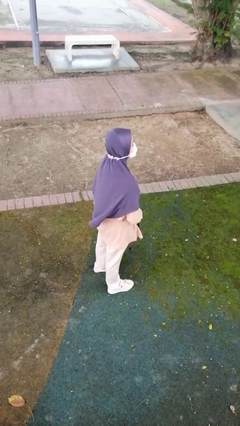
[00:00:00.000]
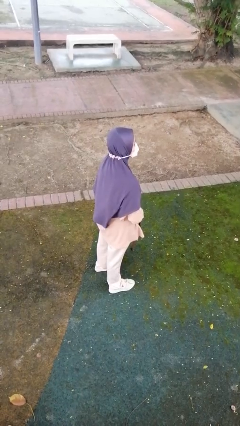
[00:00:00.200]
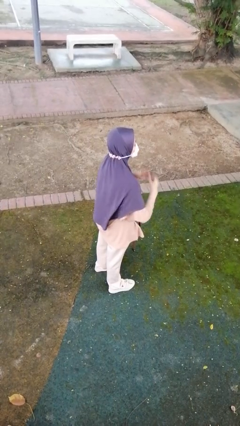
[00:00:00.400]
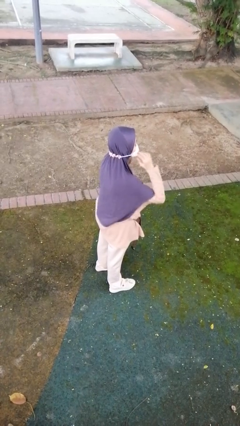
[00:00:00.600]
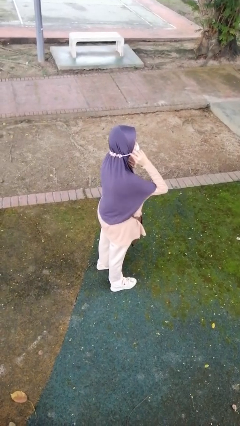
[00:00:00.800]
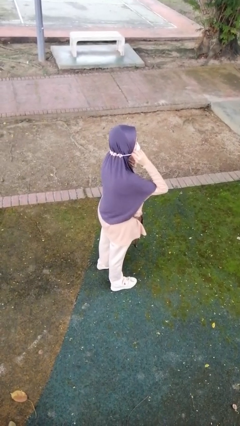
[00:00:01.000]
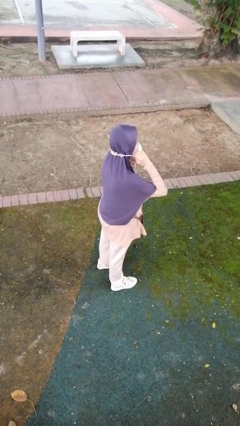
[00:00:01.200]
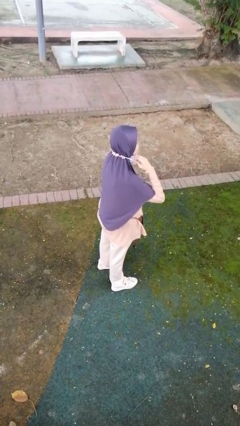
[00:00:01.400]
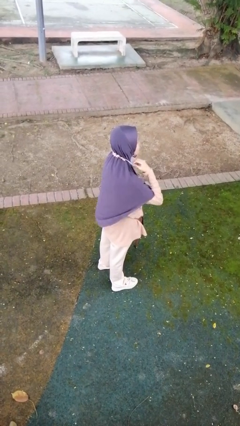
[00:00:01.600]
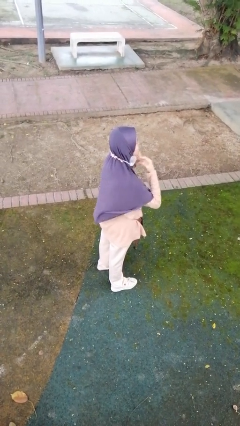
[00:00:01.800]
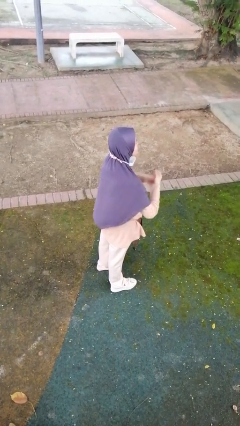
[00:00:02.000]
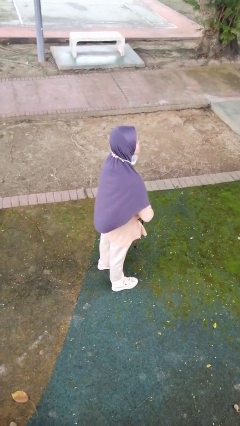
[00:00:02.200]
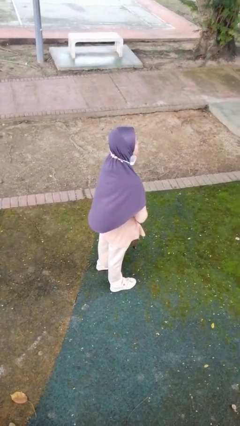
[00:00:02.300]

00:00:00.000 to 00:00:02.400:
person takes off facemask

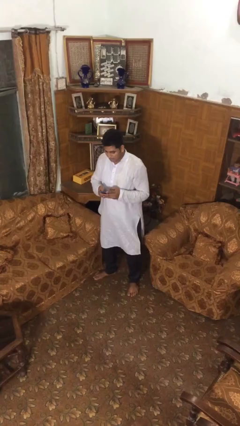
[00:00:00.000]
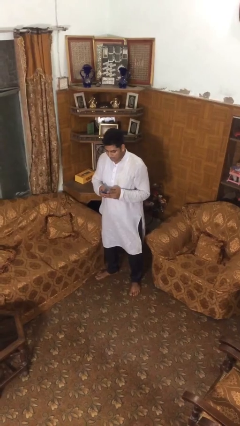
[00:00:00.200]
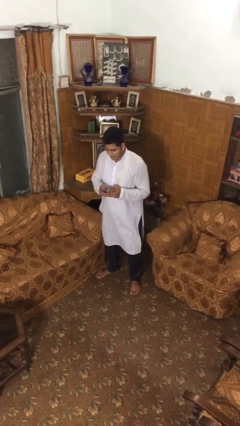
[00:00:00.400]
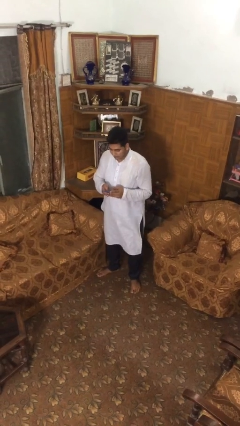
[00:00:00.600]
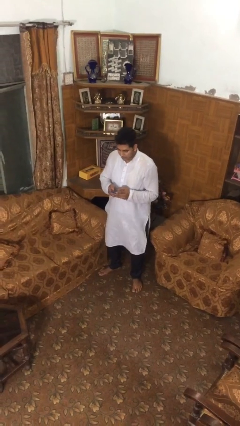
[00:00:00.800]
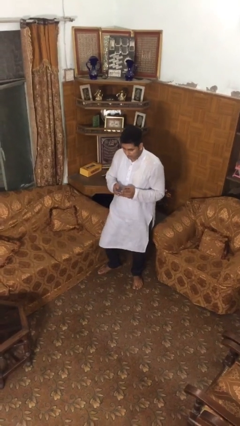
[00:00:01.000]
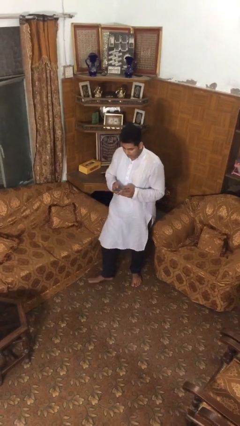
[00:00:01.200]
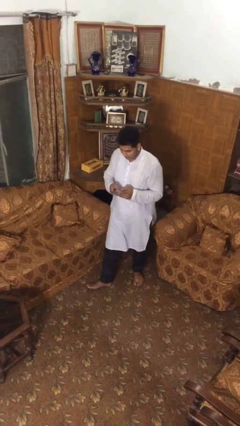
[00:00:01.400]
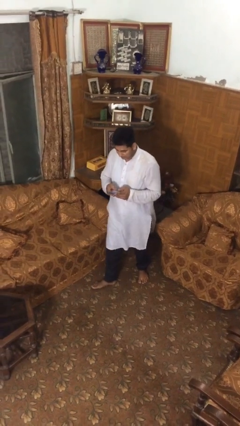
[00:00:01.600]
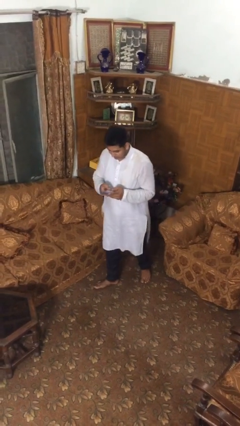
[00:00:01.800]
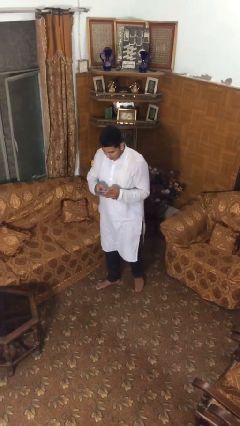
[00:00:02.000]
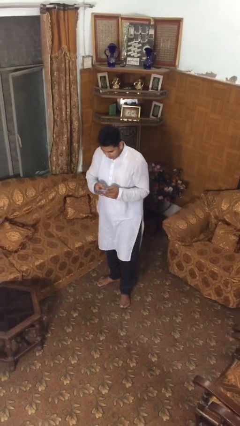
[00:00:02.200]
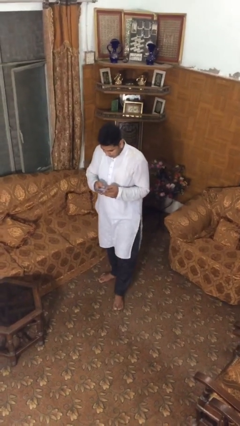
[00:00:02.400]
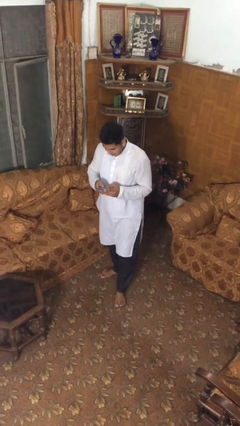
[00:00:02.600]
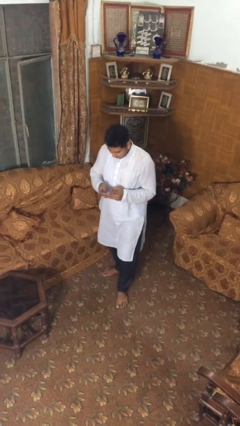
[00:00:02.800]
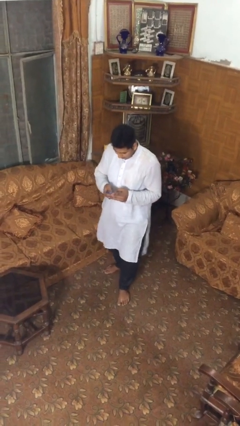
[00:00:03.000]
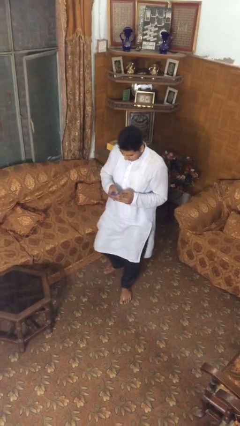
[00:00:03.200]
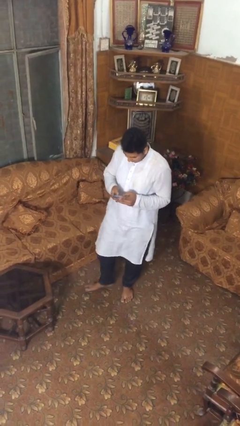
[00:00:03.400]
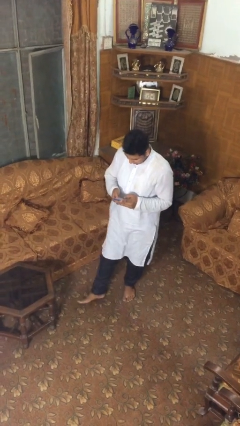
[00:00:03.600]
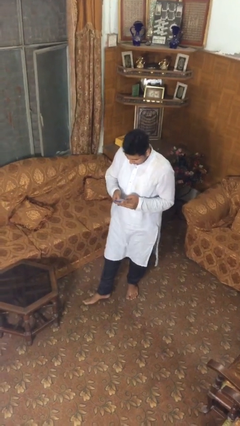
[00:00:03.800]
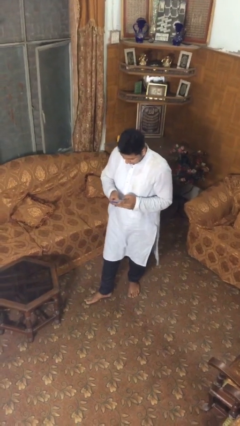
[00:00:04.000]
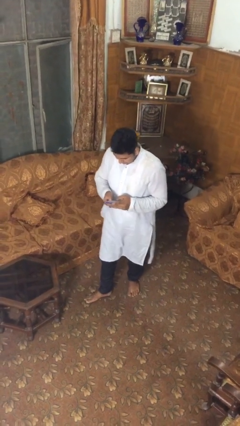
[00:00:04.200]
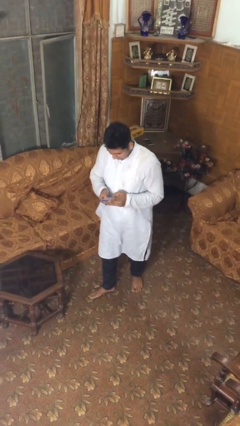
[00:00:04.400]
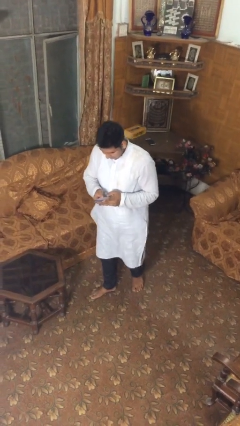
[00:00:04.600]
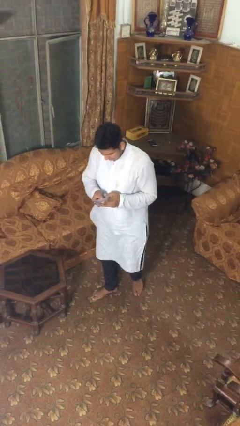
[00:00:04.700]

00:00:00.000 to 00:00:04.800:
person texts on phone

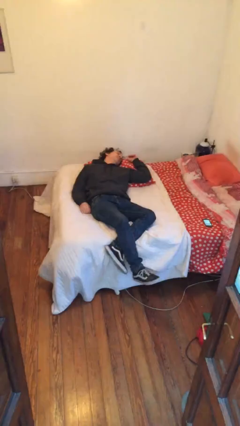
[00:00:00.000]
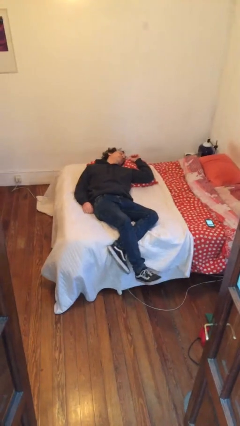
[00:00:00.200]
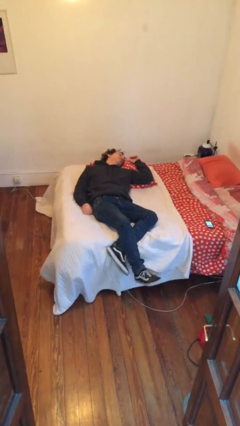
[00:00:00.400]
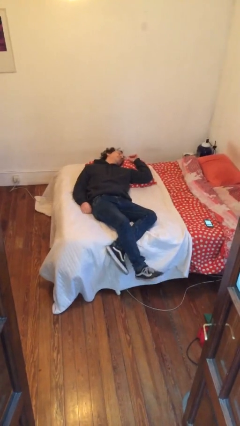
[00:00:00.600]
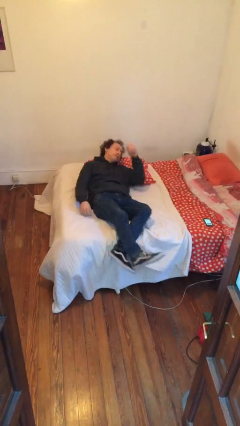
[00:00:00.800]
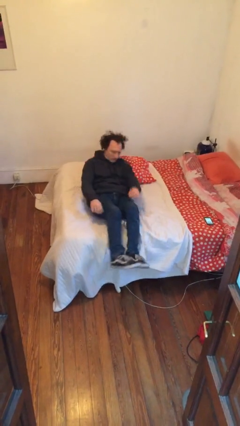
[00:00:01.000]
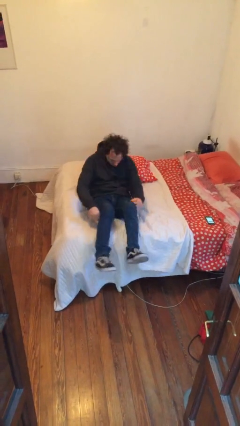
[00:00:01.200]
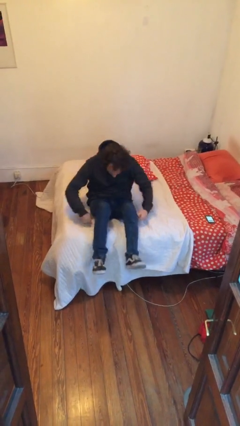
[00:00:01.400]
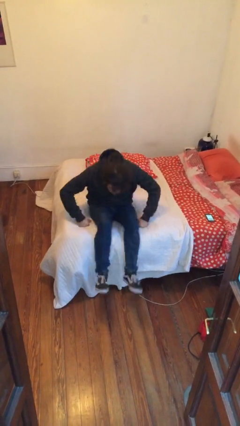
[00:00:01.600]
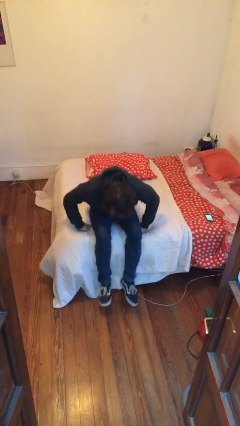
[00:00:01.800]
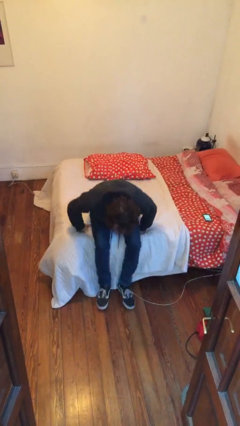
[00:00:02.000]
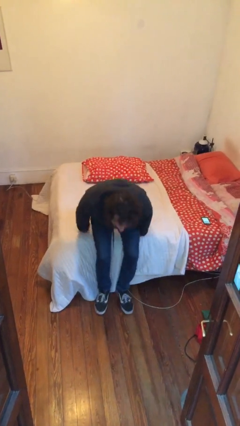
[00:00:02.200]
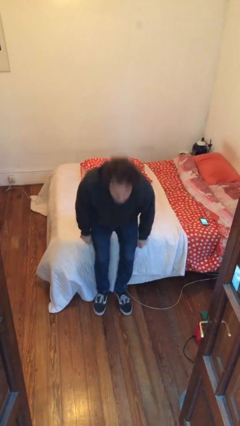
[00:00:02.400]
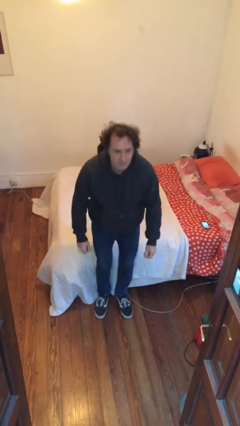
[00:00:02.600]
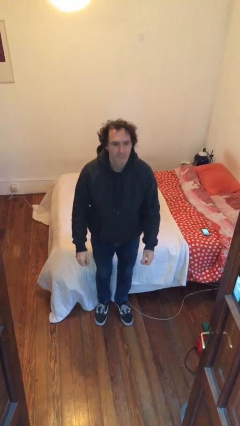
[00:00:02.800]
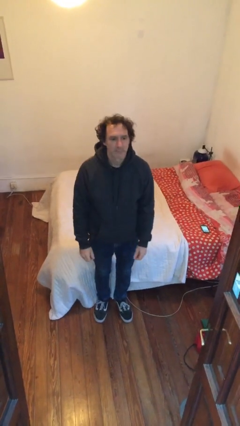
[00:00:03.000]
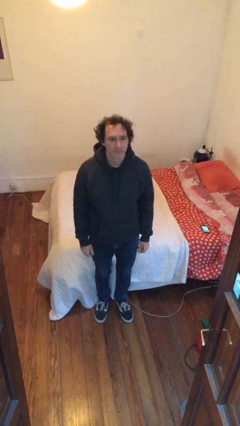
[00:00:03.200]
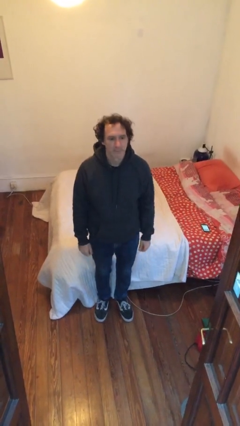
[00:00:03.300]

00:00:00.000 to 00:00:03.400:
person stands up

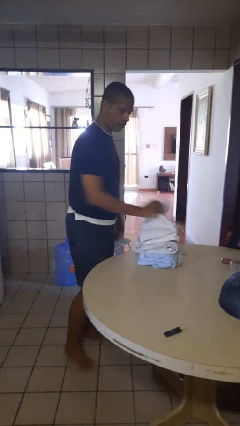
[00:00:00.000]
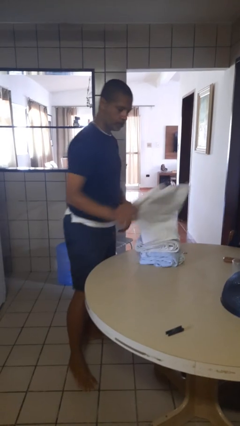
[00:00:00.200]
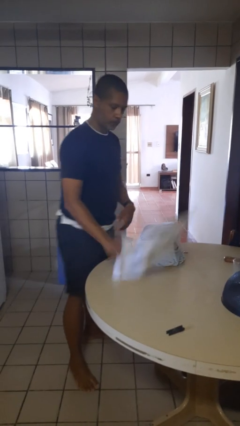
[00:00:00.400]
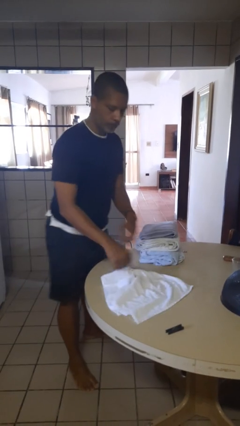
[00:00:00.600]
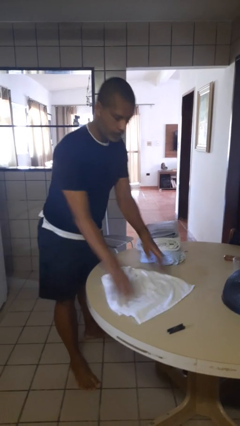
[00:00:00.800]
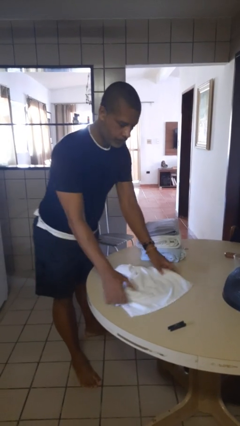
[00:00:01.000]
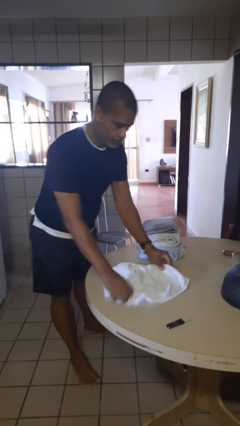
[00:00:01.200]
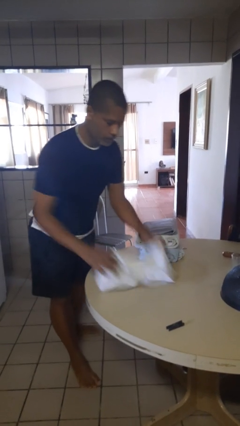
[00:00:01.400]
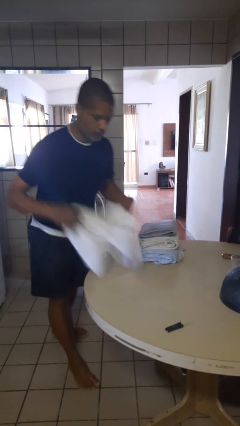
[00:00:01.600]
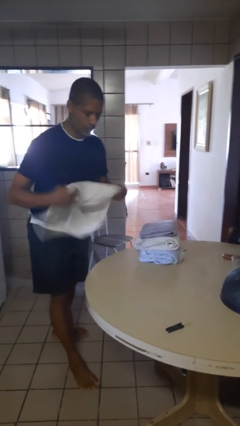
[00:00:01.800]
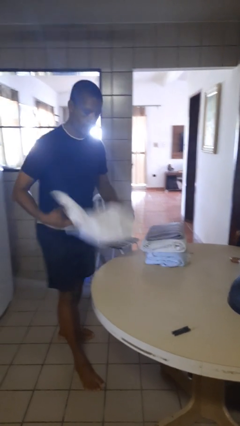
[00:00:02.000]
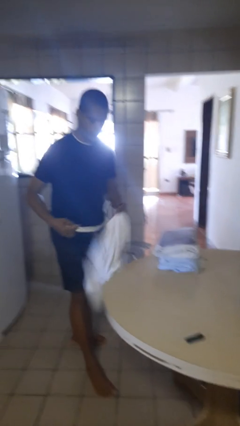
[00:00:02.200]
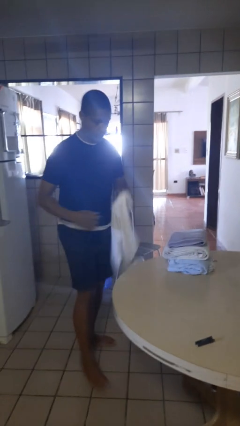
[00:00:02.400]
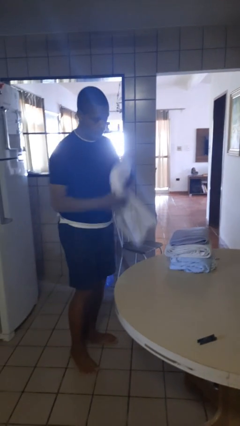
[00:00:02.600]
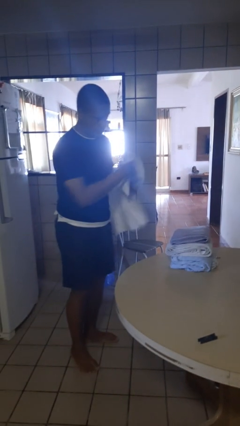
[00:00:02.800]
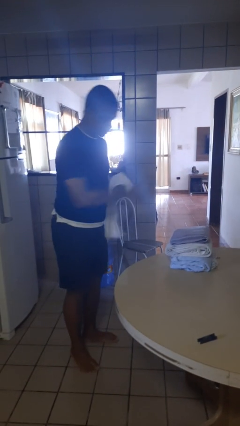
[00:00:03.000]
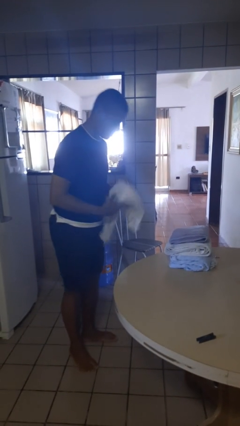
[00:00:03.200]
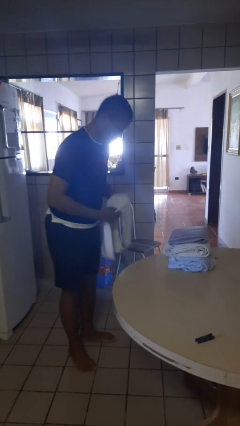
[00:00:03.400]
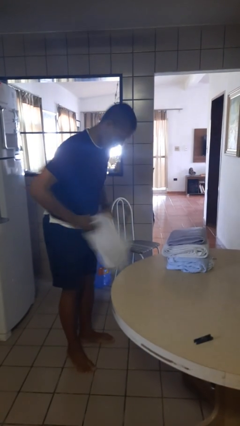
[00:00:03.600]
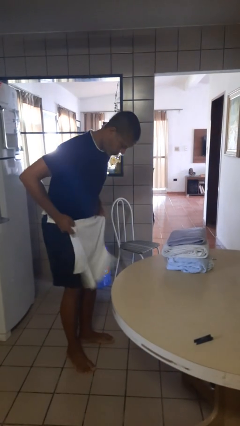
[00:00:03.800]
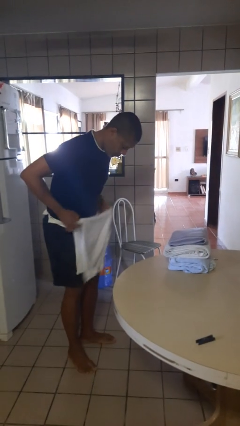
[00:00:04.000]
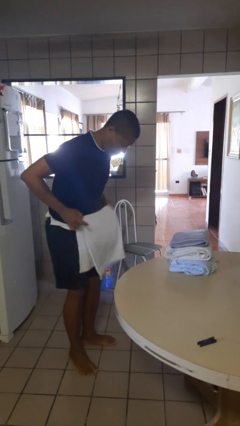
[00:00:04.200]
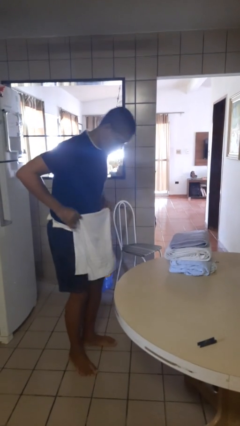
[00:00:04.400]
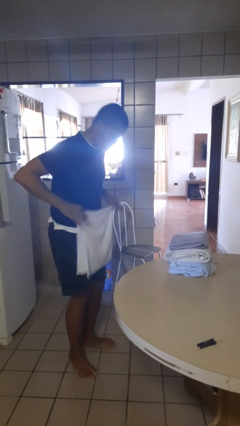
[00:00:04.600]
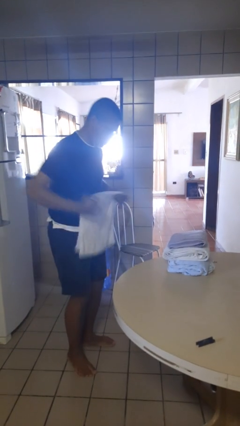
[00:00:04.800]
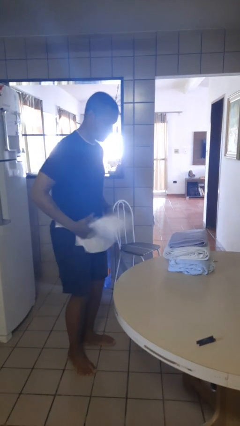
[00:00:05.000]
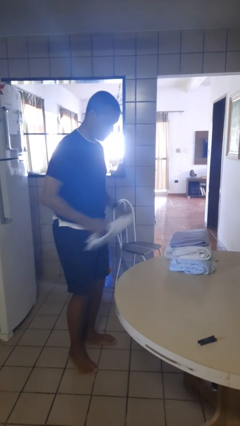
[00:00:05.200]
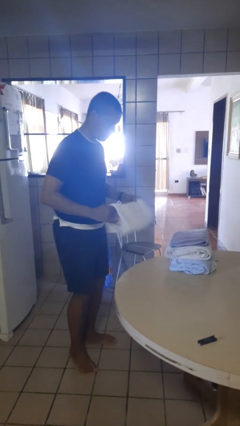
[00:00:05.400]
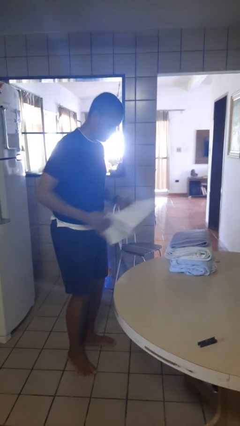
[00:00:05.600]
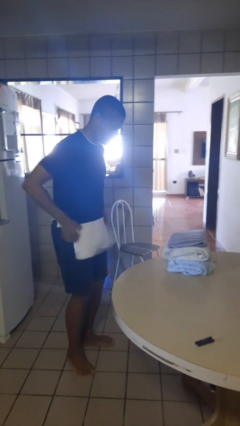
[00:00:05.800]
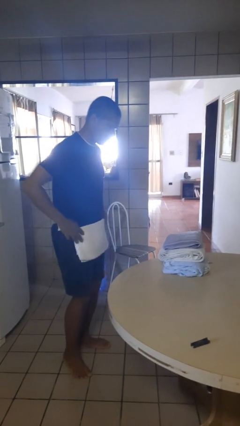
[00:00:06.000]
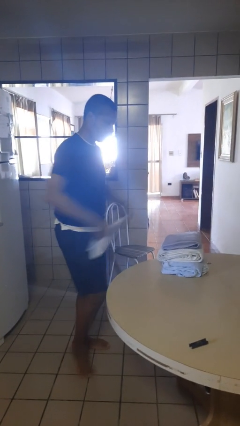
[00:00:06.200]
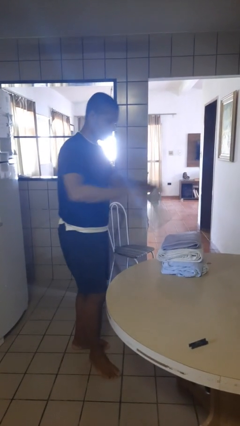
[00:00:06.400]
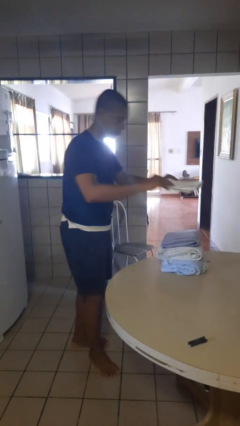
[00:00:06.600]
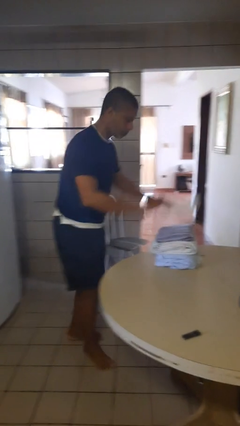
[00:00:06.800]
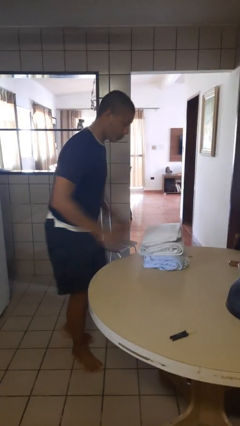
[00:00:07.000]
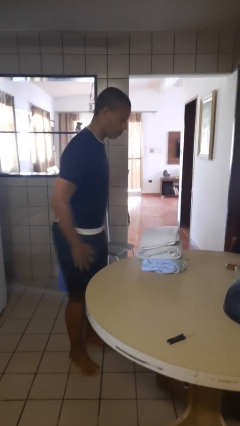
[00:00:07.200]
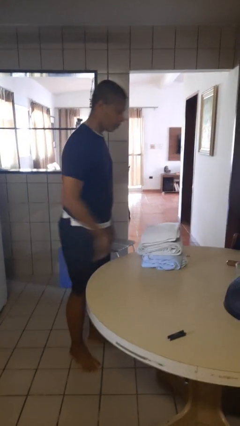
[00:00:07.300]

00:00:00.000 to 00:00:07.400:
person folds towel
